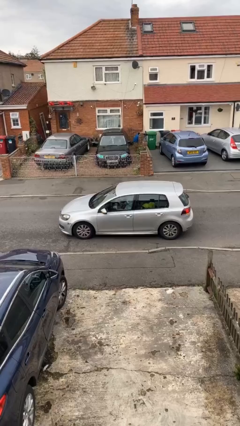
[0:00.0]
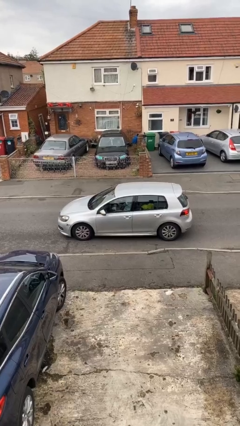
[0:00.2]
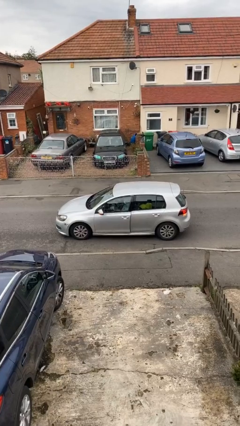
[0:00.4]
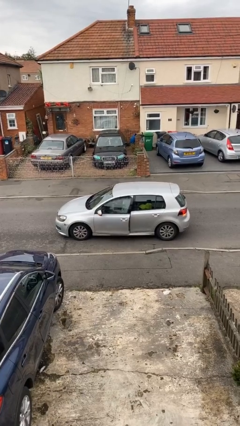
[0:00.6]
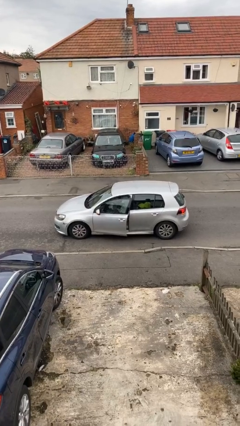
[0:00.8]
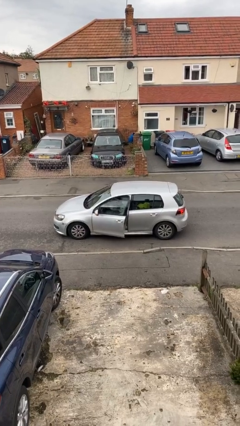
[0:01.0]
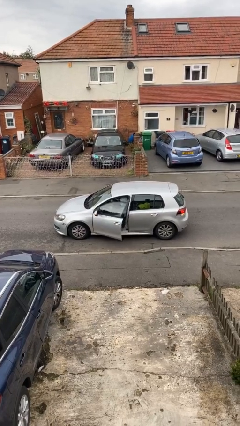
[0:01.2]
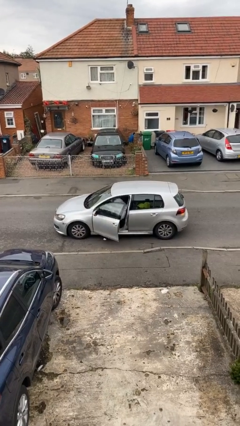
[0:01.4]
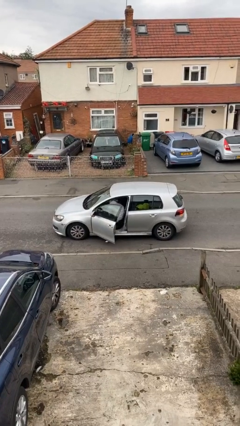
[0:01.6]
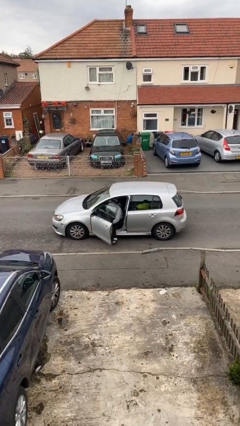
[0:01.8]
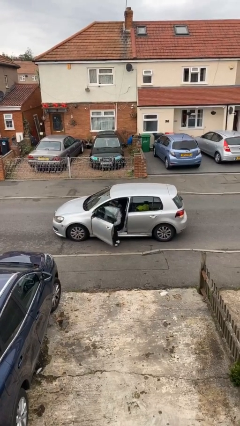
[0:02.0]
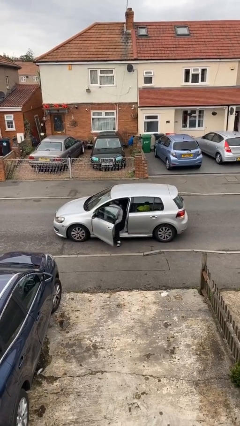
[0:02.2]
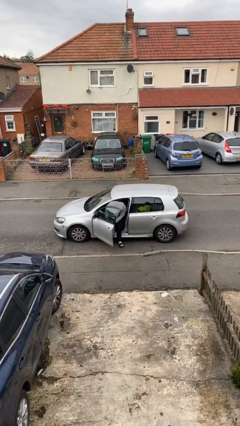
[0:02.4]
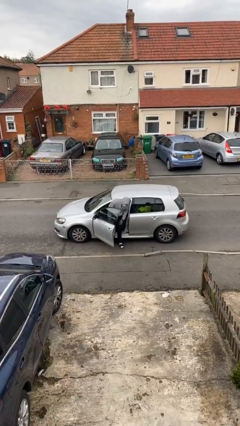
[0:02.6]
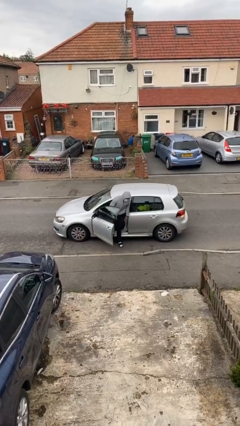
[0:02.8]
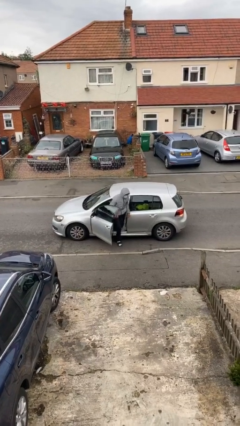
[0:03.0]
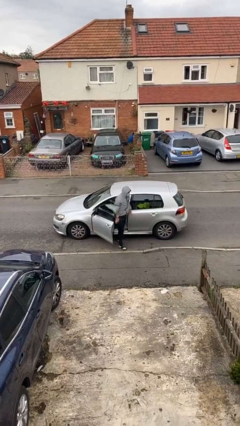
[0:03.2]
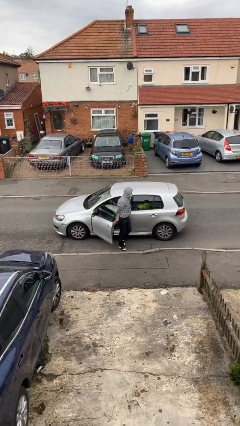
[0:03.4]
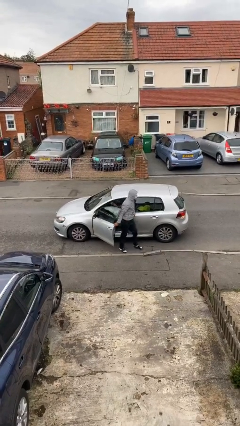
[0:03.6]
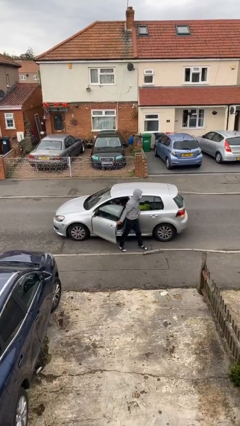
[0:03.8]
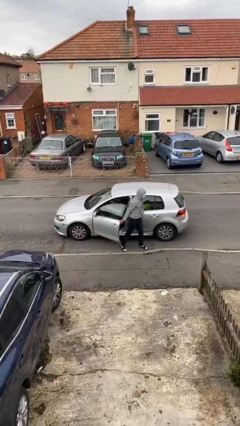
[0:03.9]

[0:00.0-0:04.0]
car drops off person

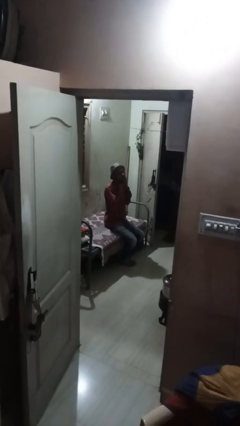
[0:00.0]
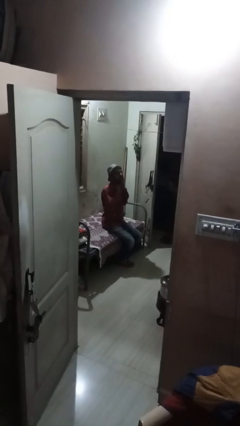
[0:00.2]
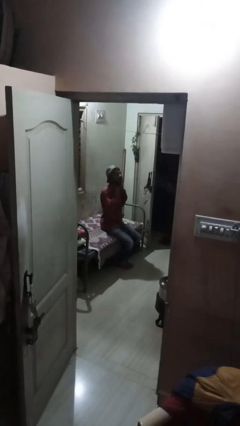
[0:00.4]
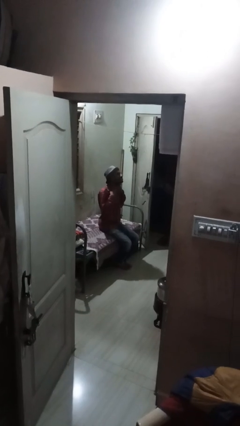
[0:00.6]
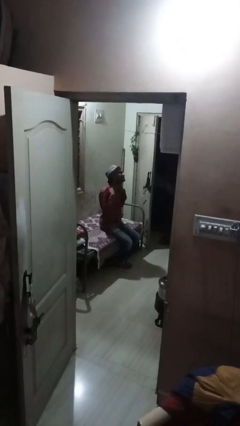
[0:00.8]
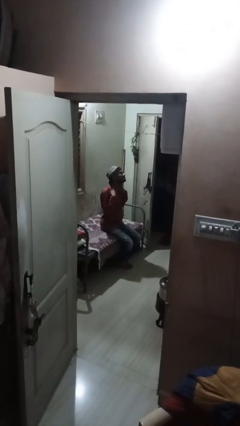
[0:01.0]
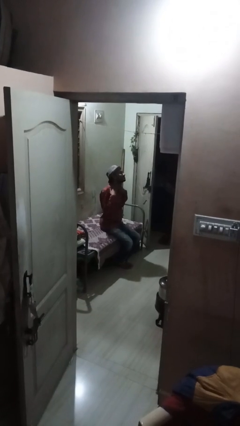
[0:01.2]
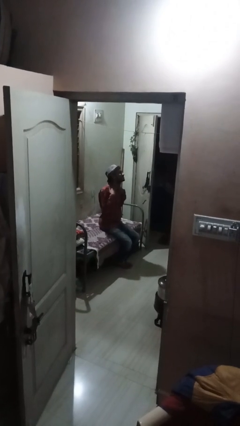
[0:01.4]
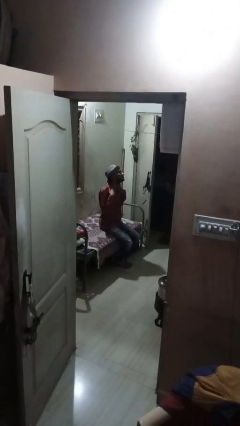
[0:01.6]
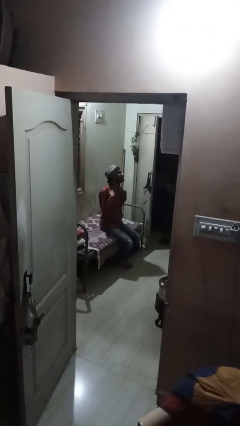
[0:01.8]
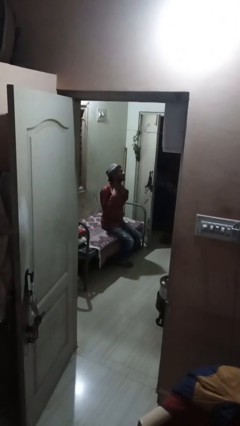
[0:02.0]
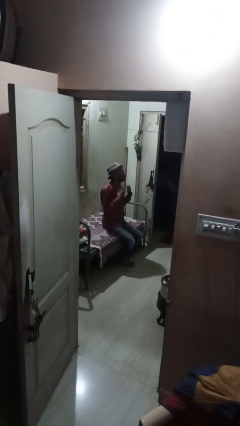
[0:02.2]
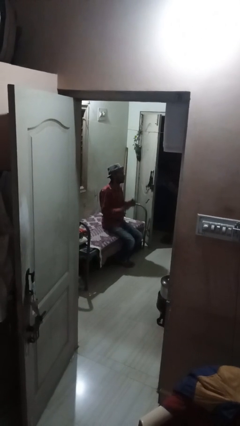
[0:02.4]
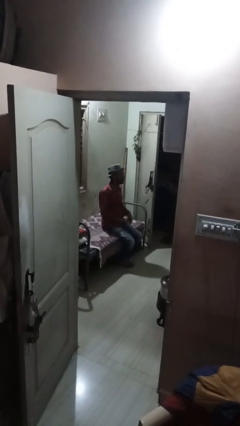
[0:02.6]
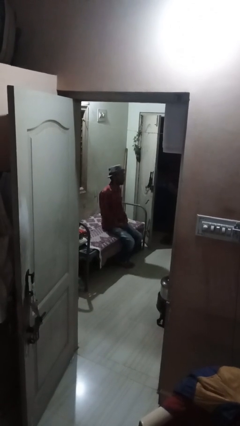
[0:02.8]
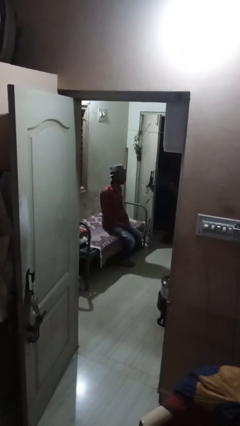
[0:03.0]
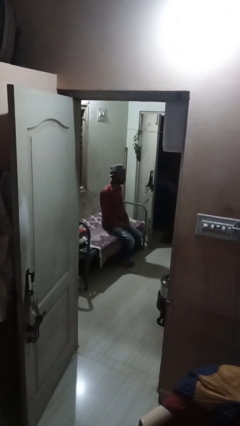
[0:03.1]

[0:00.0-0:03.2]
person rubs neck

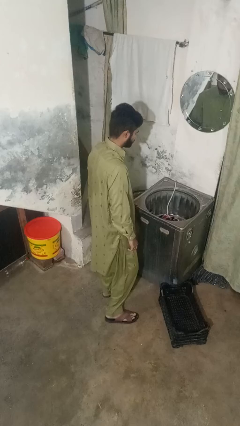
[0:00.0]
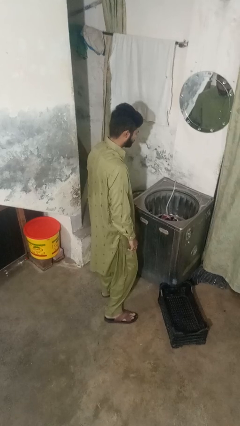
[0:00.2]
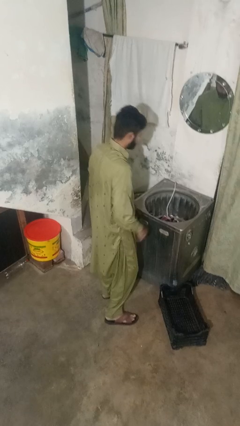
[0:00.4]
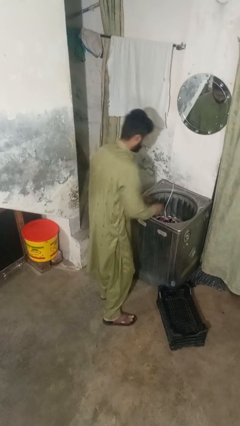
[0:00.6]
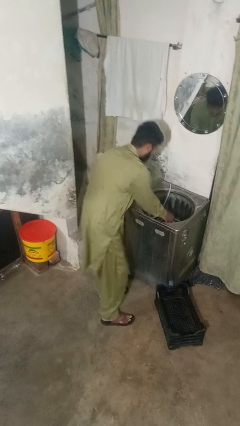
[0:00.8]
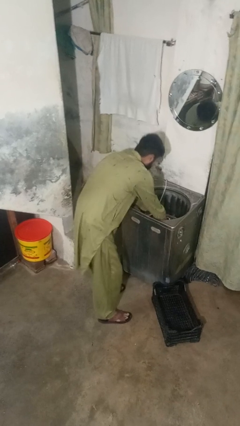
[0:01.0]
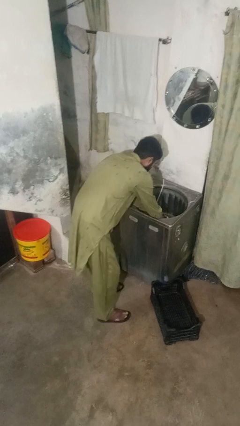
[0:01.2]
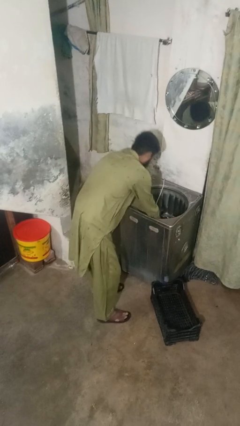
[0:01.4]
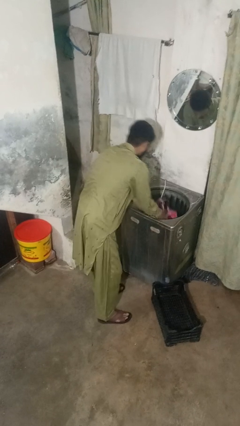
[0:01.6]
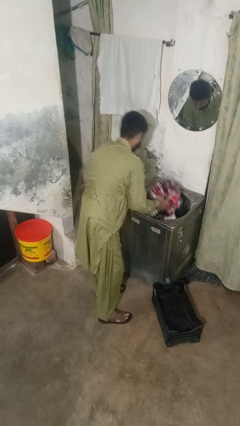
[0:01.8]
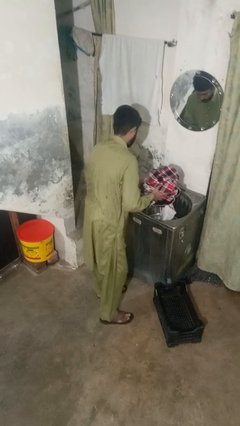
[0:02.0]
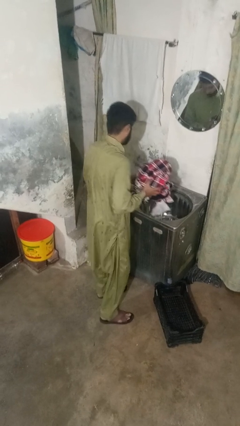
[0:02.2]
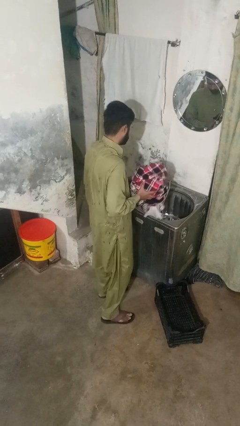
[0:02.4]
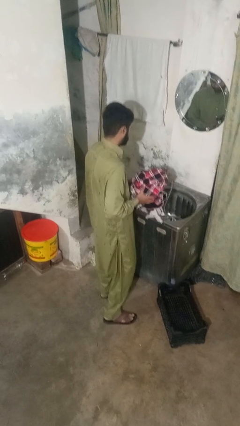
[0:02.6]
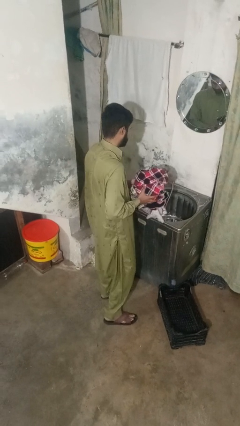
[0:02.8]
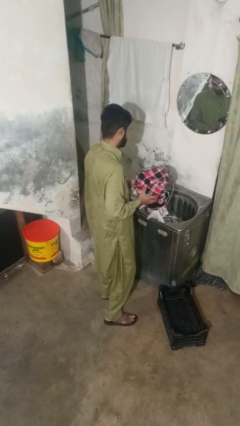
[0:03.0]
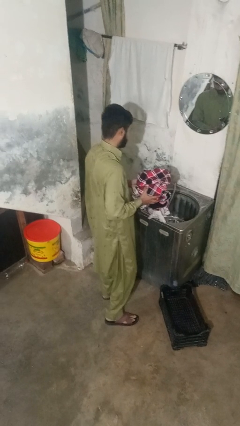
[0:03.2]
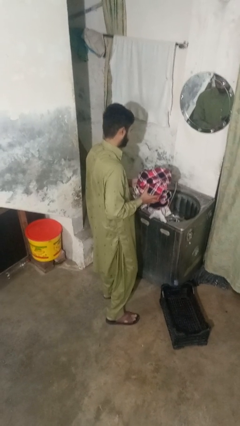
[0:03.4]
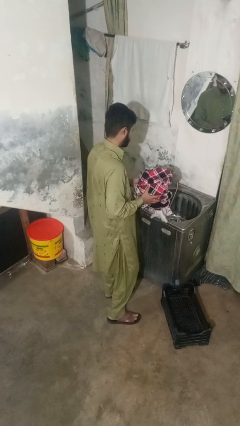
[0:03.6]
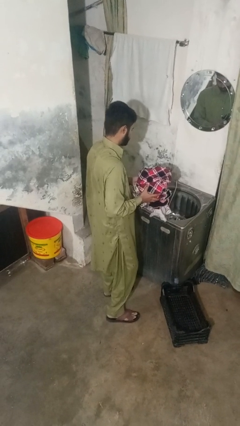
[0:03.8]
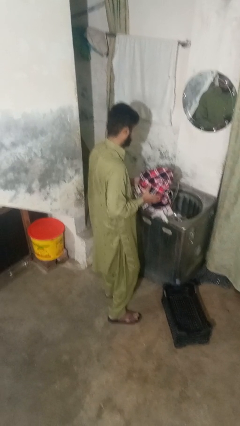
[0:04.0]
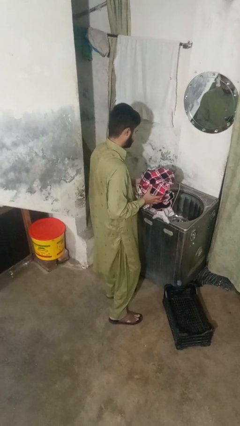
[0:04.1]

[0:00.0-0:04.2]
person unloads clotheswasher

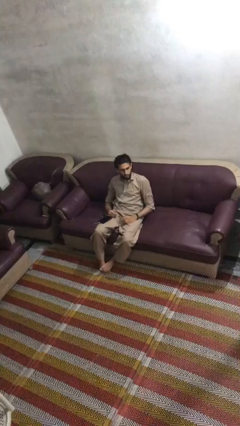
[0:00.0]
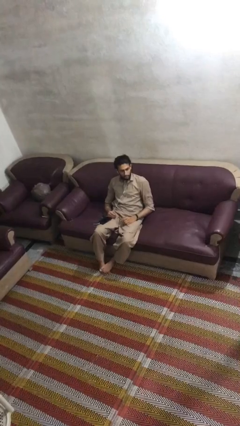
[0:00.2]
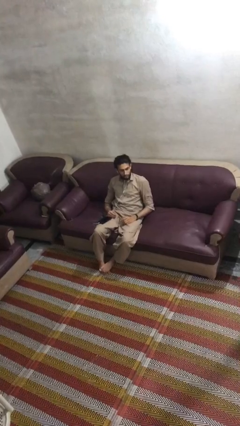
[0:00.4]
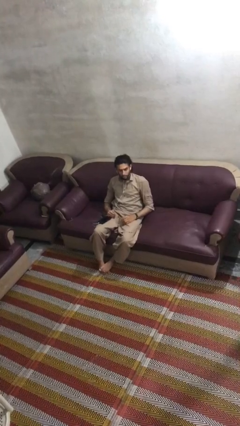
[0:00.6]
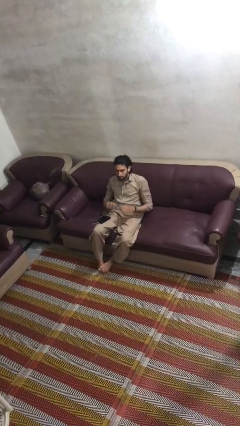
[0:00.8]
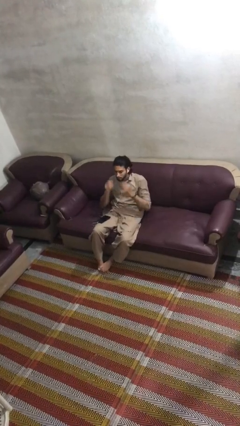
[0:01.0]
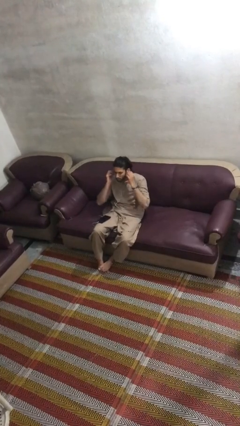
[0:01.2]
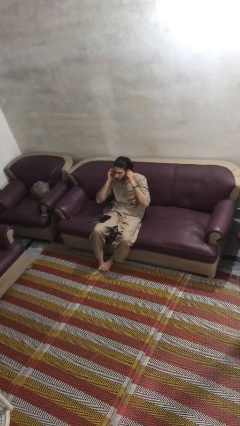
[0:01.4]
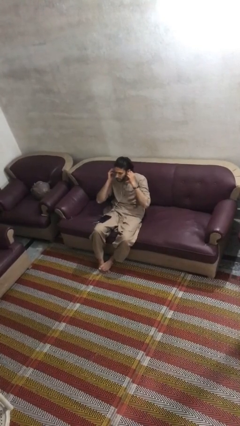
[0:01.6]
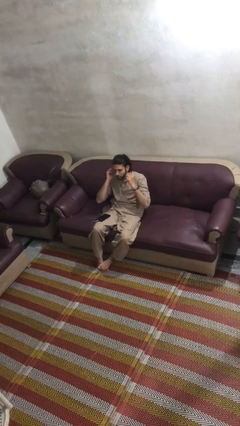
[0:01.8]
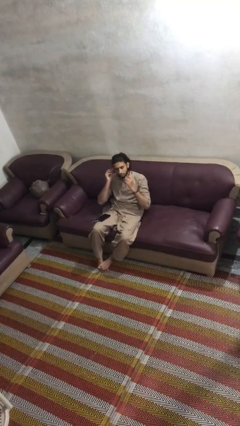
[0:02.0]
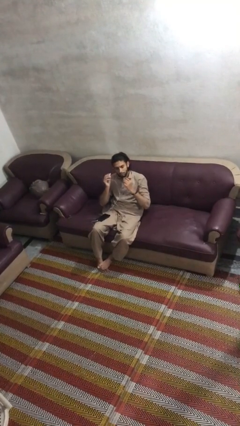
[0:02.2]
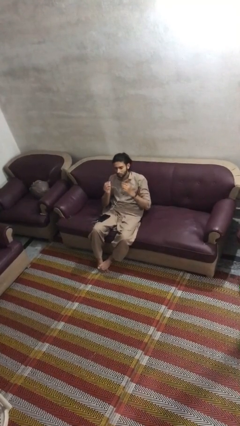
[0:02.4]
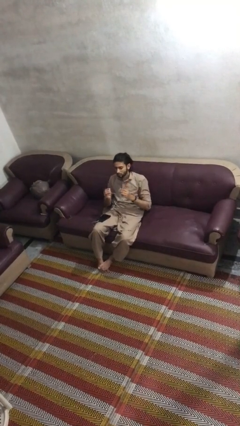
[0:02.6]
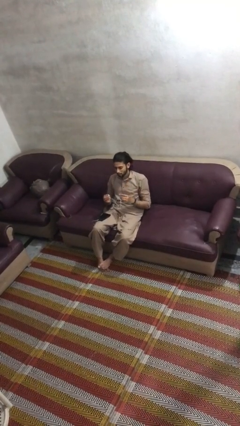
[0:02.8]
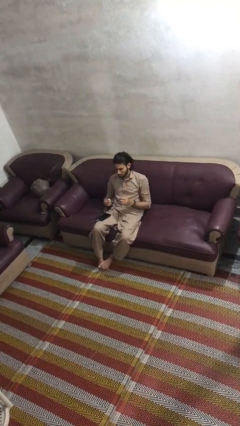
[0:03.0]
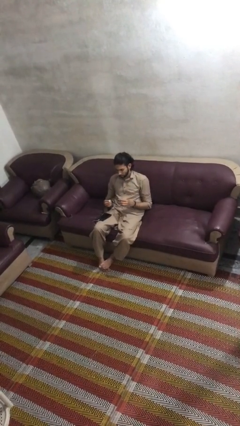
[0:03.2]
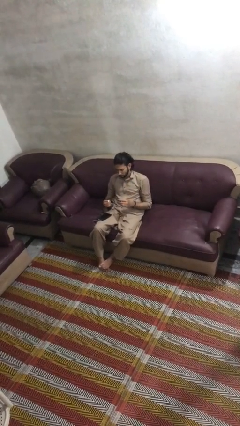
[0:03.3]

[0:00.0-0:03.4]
person takes off headphones

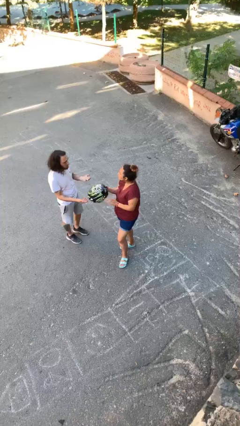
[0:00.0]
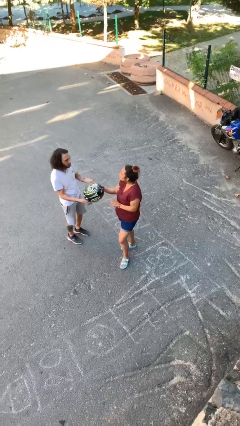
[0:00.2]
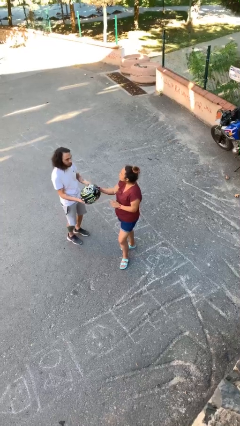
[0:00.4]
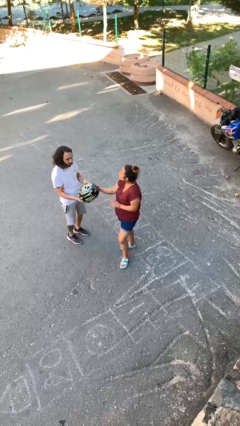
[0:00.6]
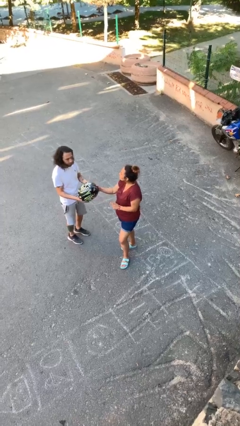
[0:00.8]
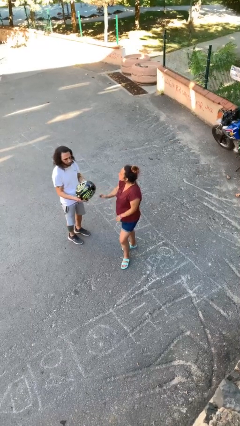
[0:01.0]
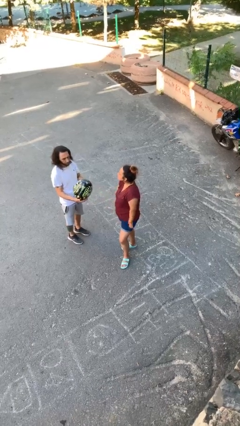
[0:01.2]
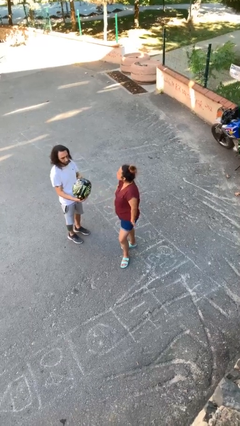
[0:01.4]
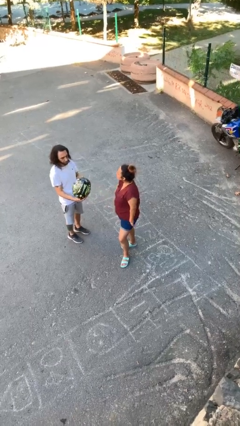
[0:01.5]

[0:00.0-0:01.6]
person transfers object to person

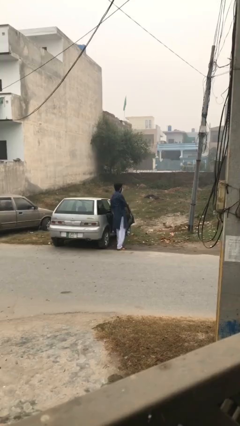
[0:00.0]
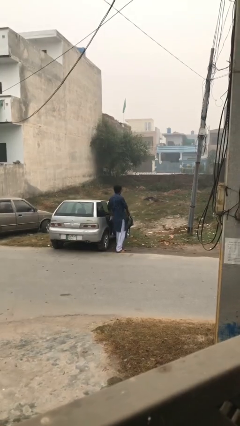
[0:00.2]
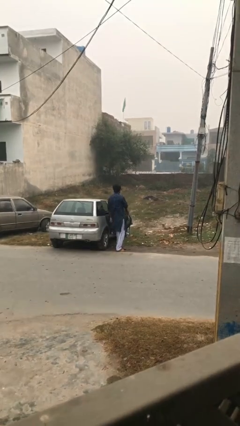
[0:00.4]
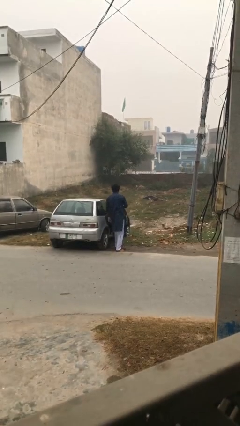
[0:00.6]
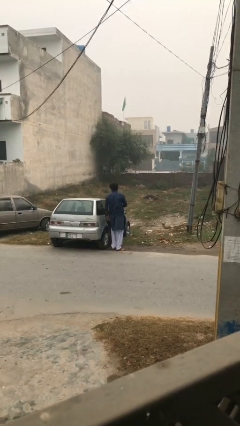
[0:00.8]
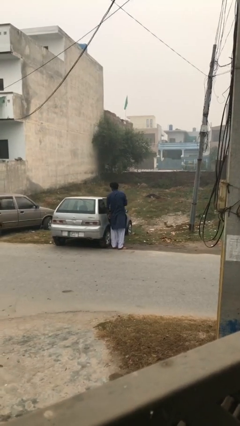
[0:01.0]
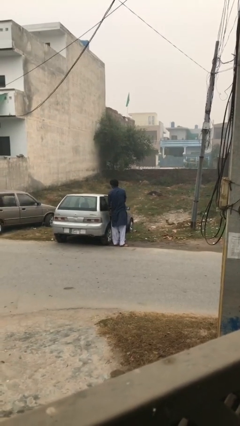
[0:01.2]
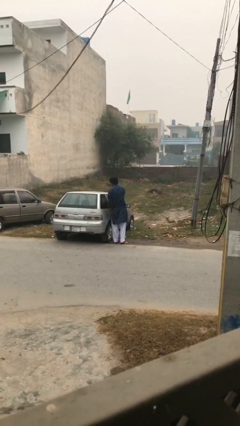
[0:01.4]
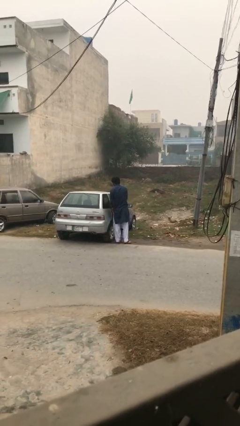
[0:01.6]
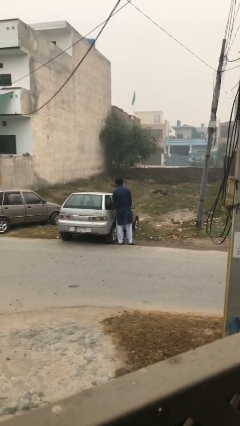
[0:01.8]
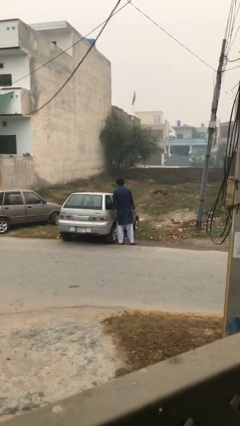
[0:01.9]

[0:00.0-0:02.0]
person closes car door
